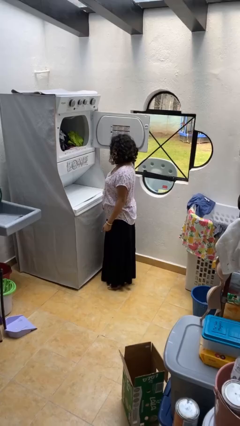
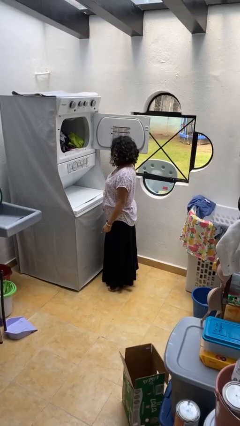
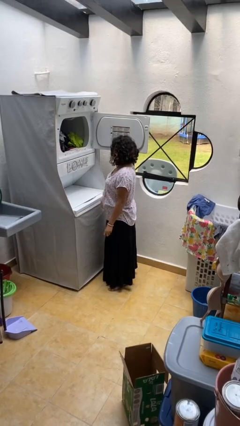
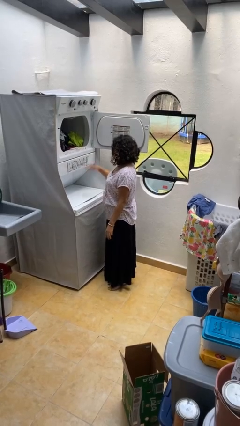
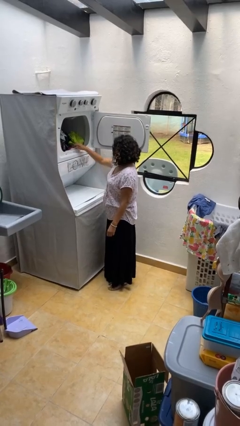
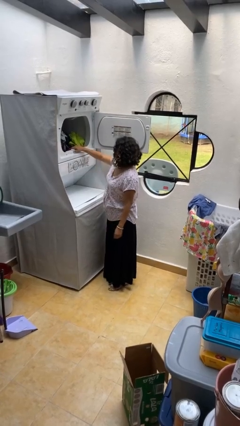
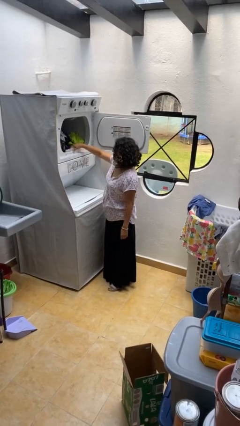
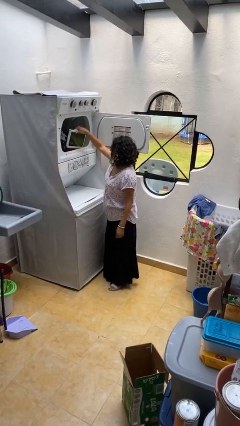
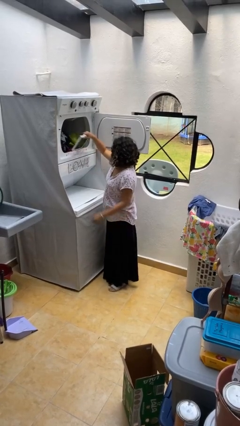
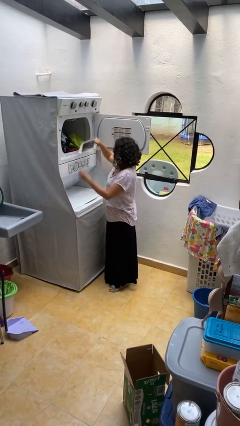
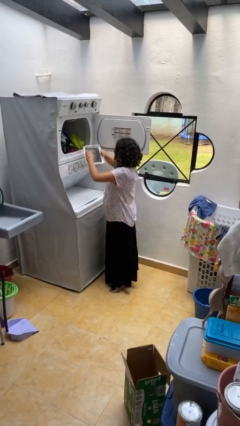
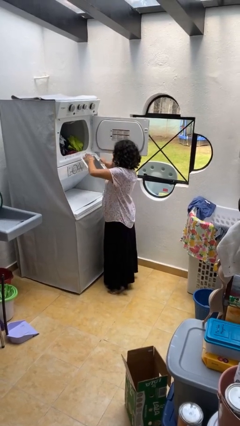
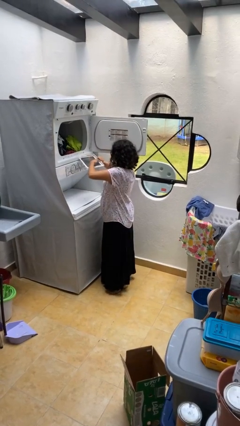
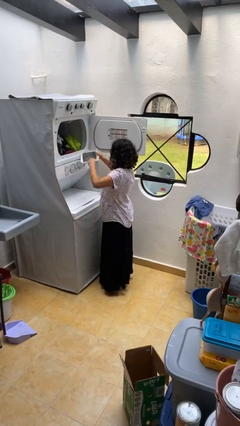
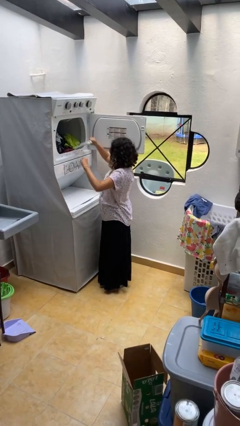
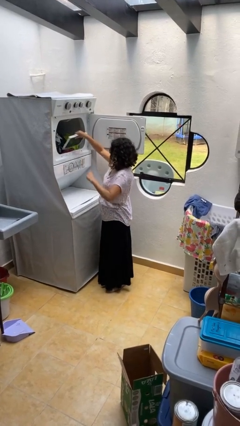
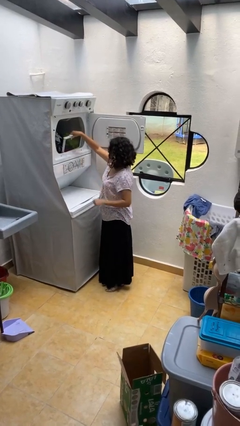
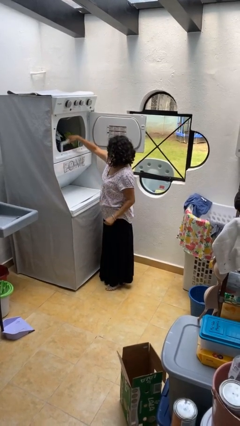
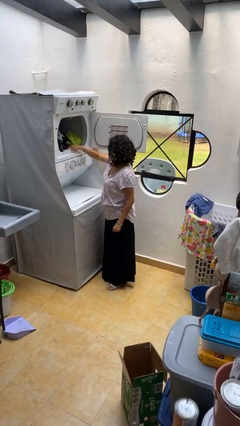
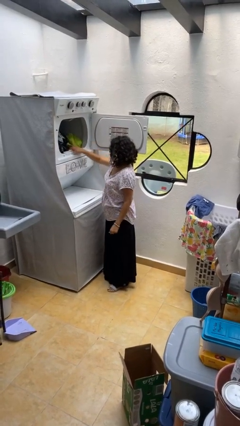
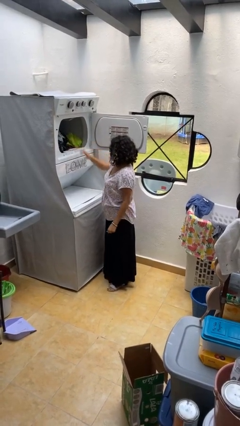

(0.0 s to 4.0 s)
person cleans dryer lint trap

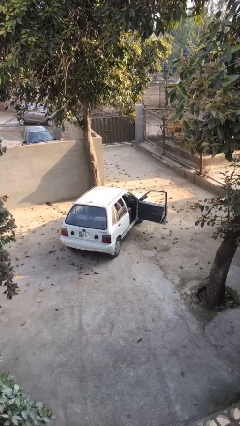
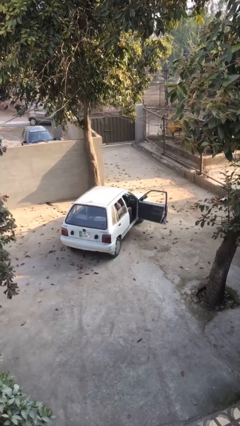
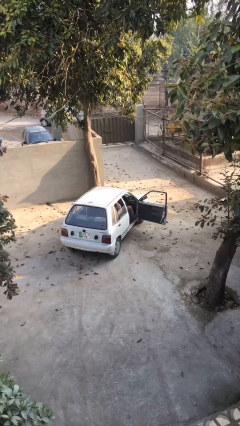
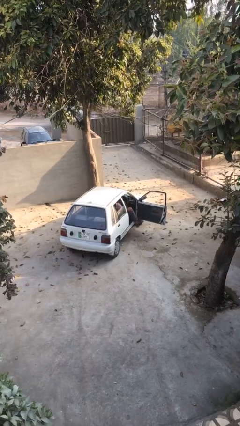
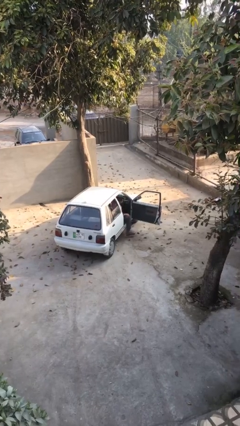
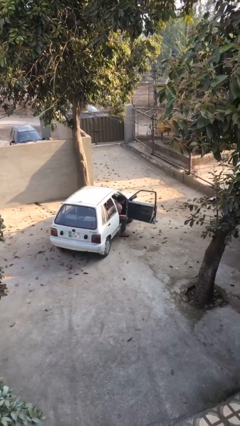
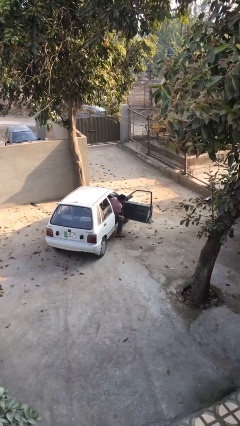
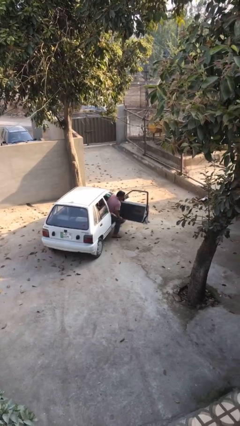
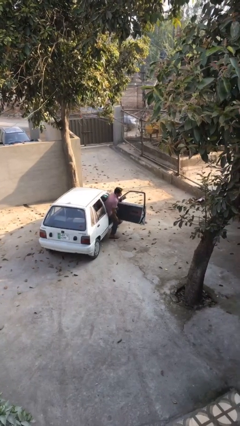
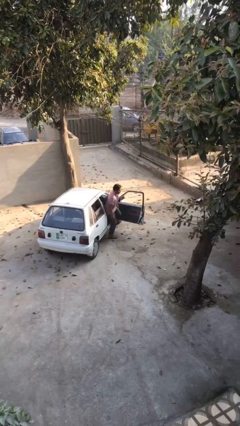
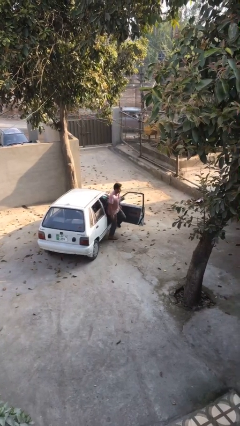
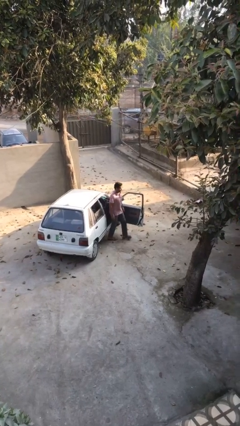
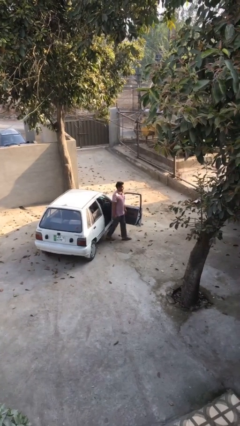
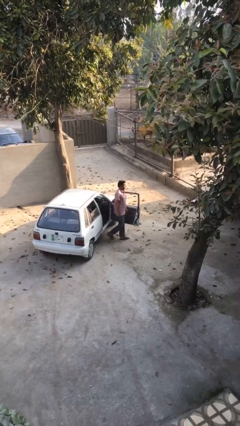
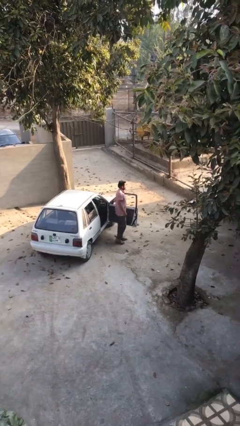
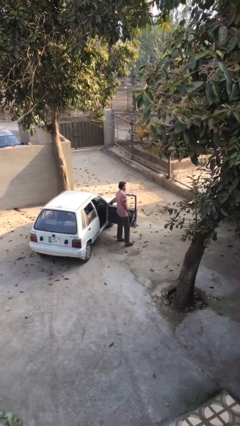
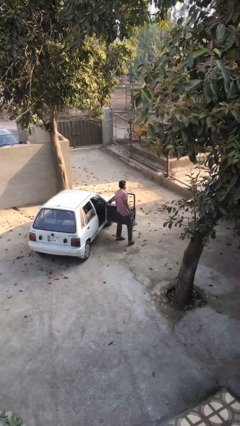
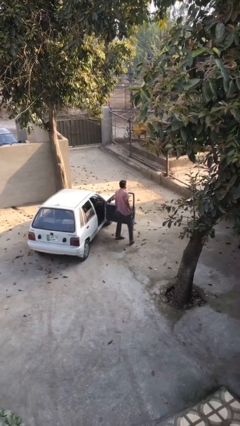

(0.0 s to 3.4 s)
person exits car

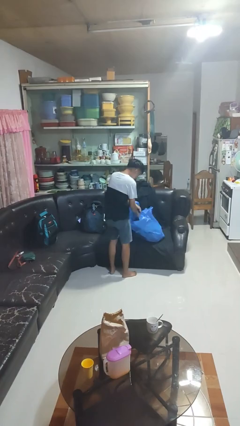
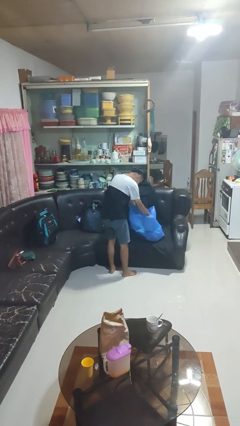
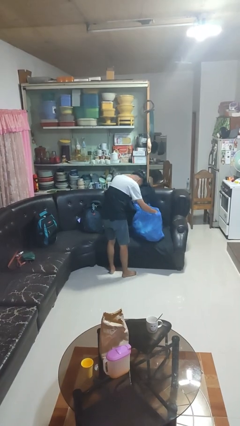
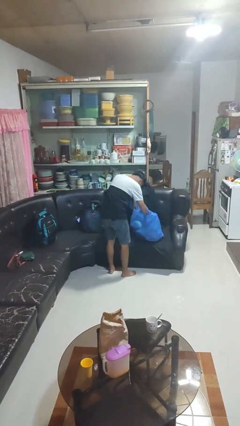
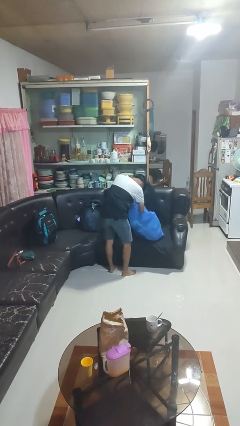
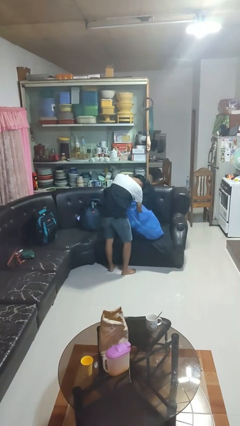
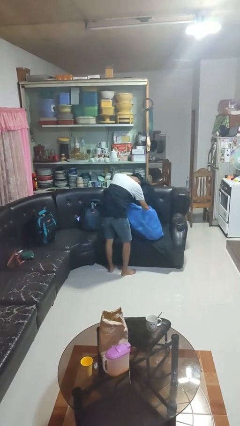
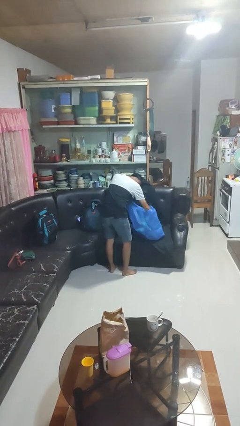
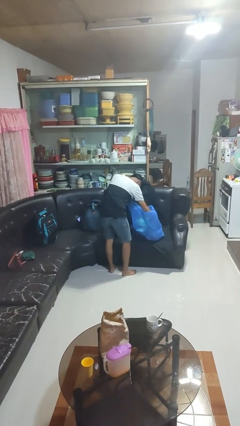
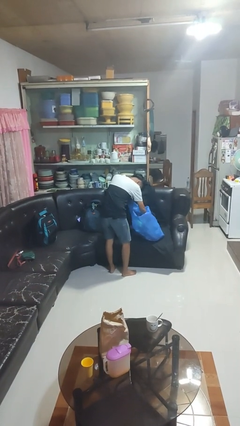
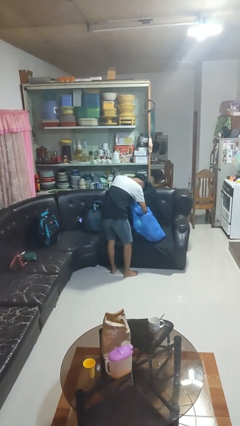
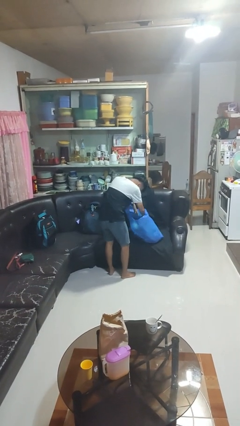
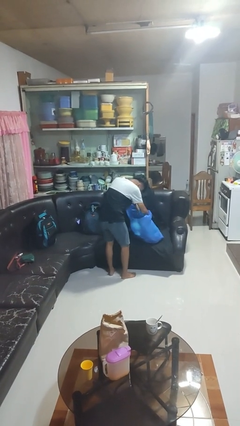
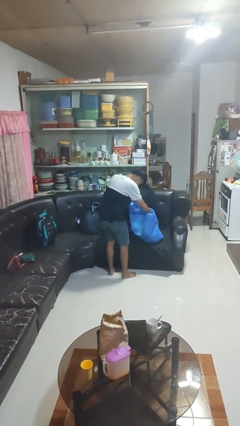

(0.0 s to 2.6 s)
person searches in bag

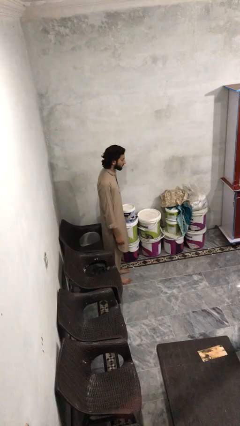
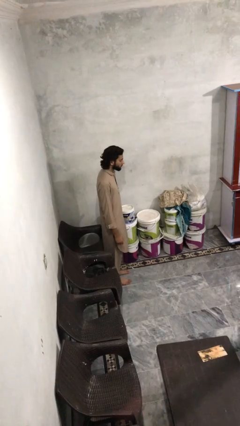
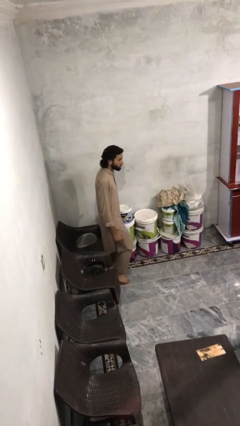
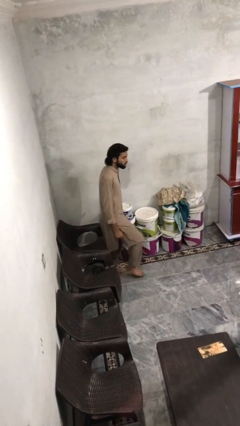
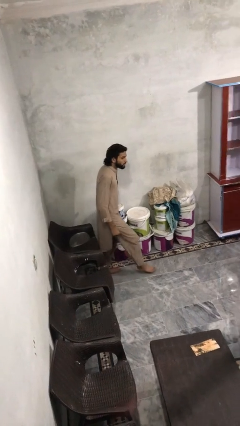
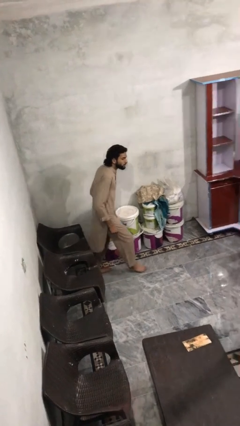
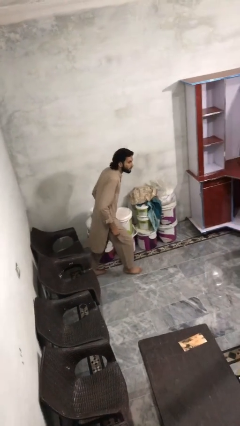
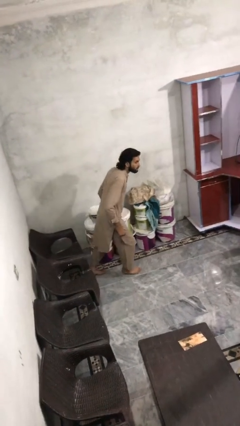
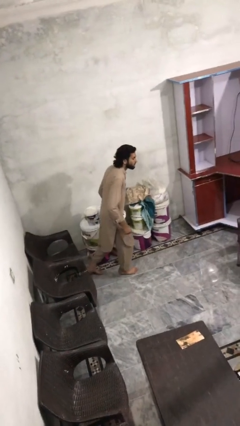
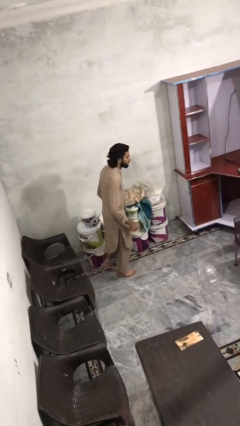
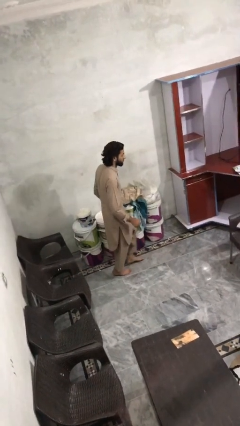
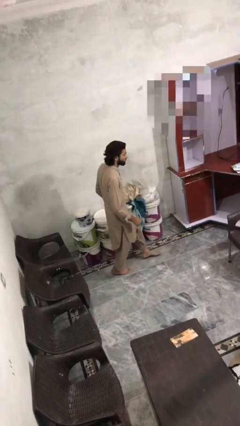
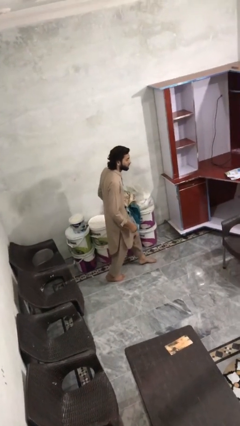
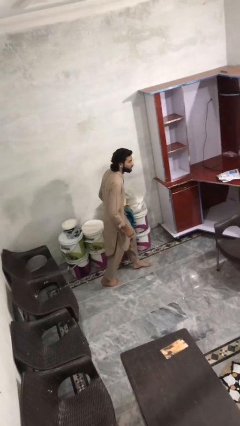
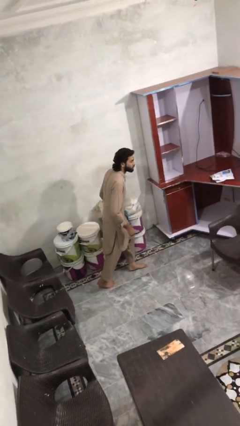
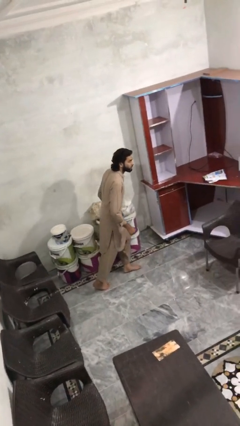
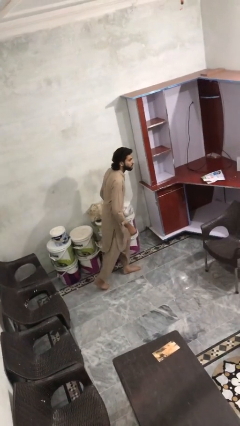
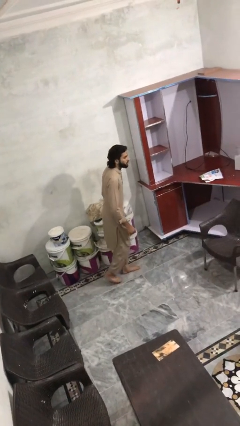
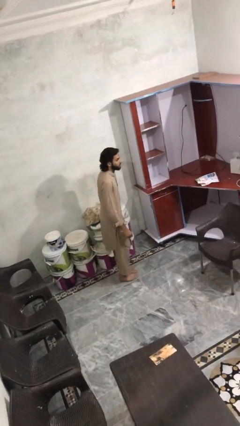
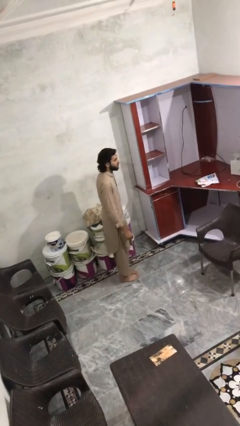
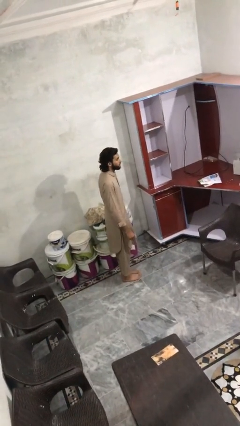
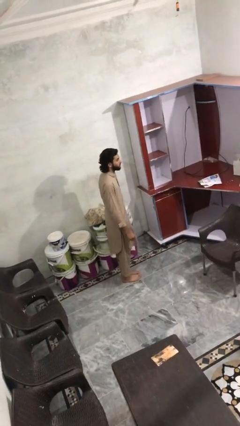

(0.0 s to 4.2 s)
person walks tiptoe

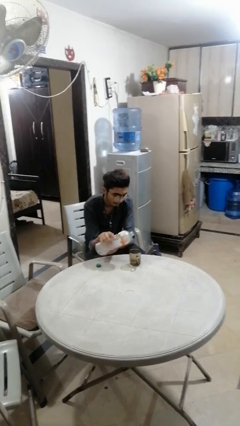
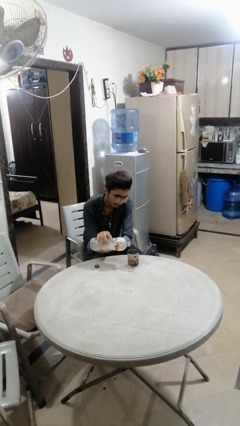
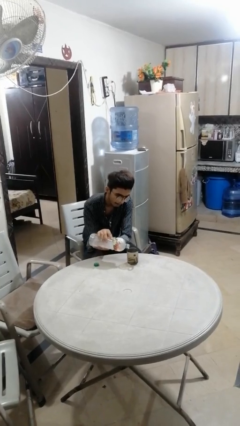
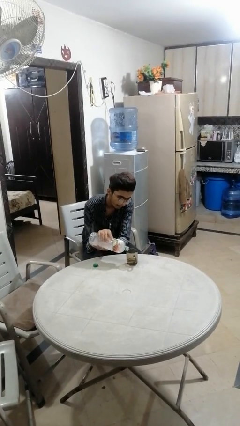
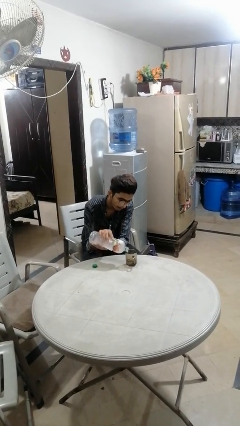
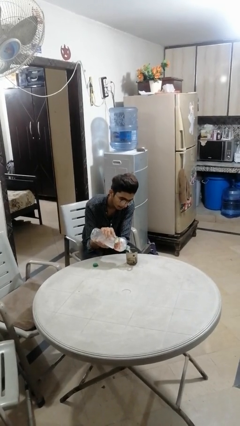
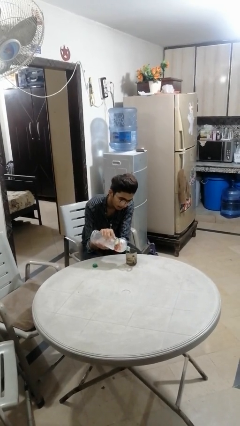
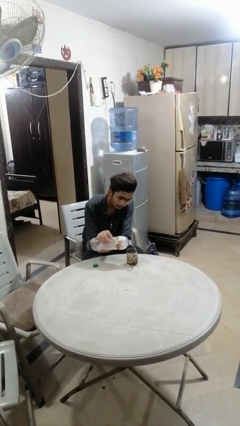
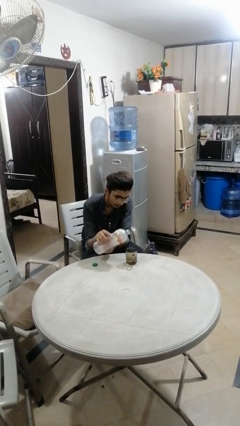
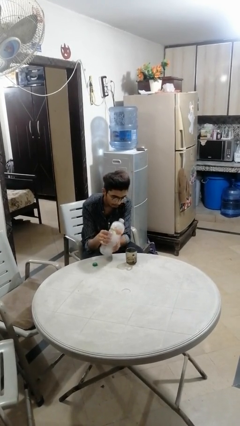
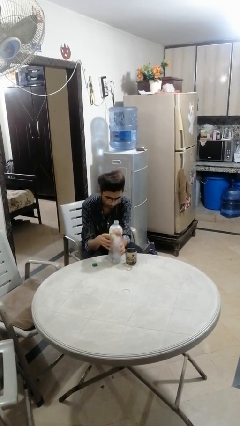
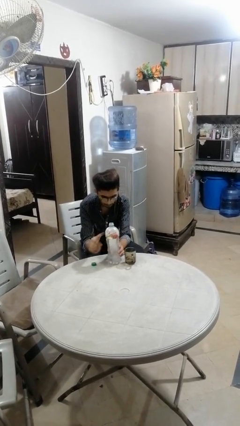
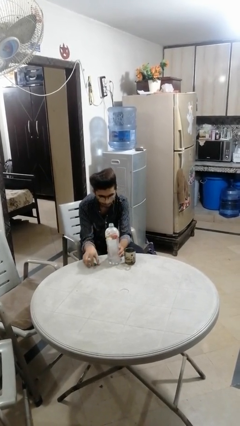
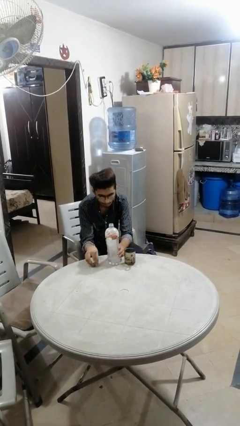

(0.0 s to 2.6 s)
person pours liquid into cup

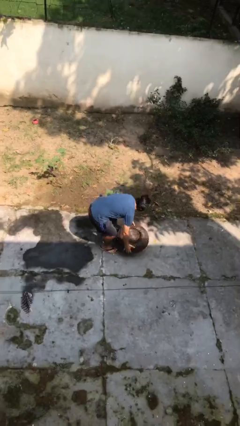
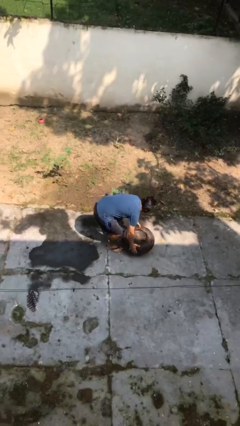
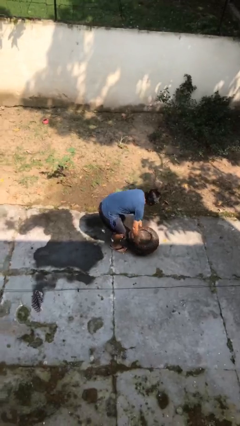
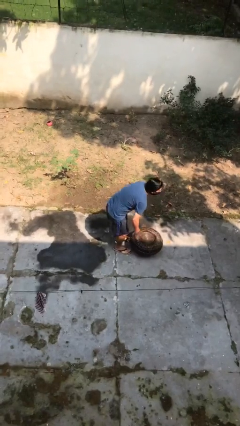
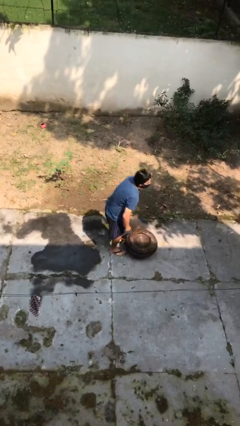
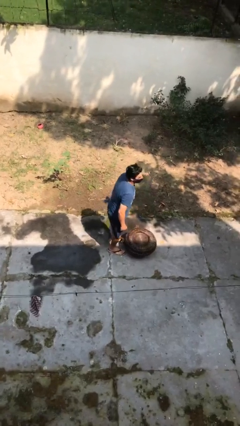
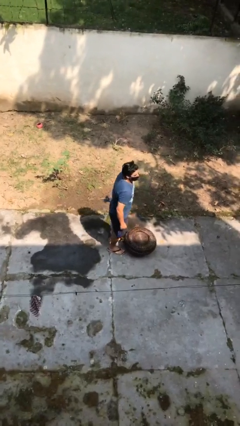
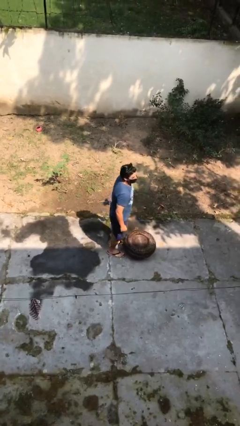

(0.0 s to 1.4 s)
person puts down object on floor
